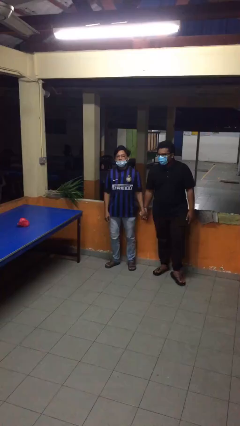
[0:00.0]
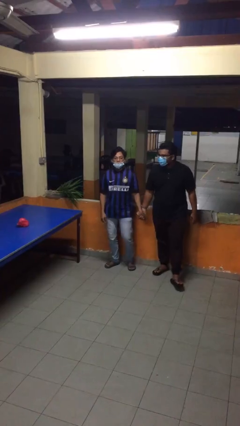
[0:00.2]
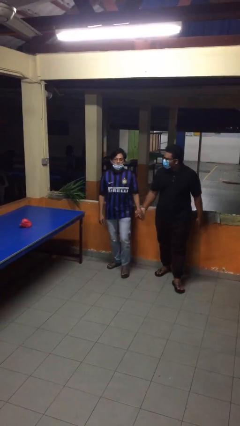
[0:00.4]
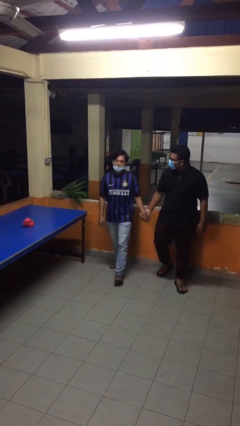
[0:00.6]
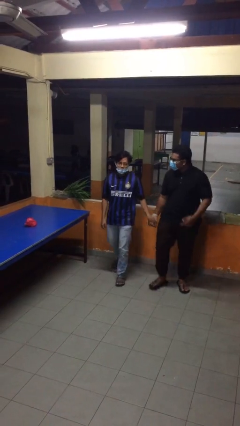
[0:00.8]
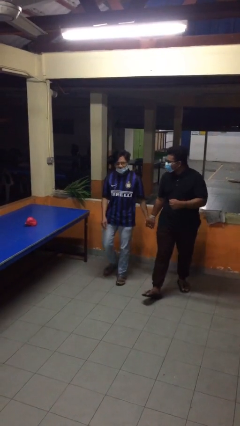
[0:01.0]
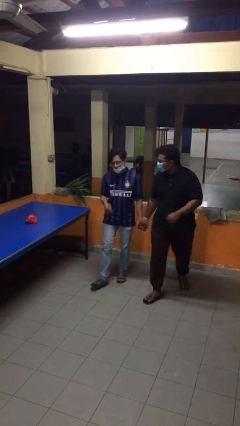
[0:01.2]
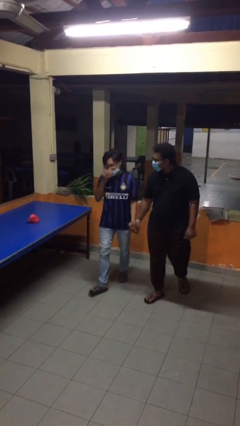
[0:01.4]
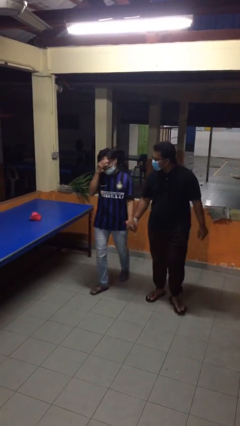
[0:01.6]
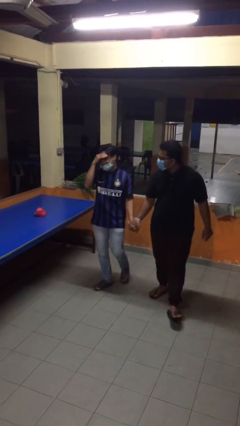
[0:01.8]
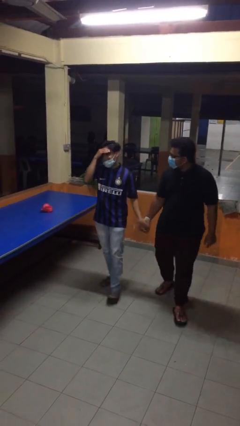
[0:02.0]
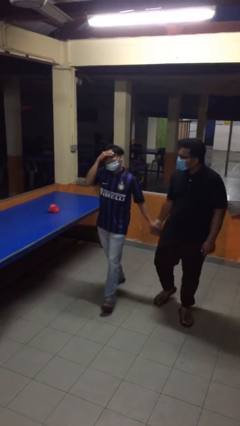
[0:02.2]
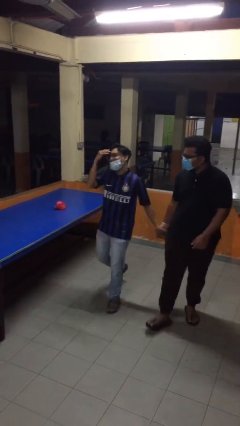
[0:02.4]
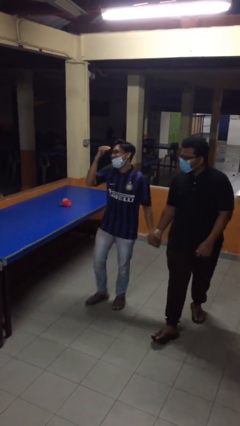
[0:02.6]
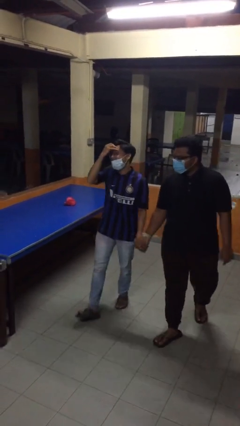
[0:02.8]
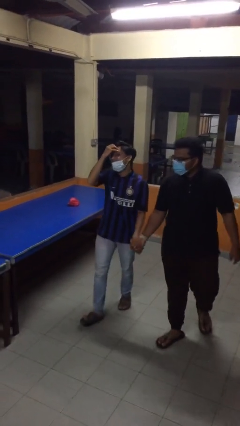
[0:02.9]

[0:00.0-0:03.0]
person holds hand

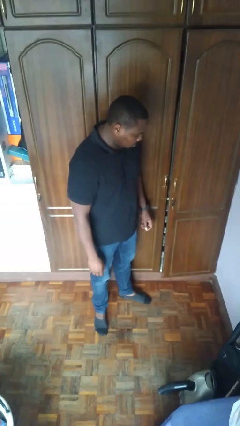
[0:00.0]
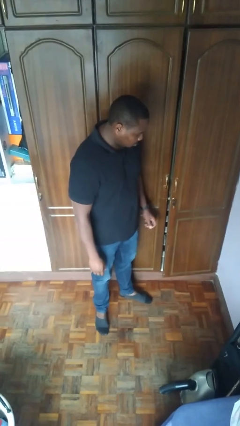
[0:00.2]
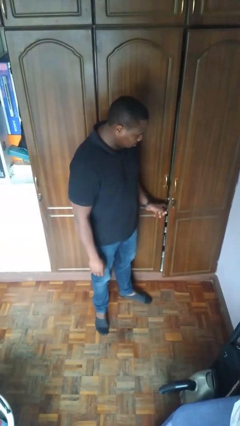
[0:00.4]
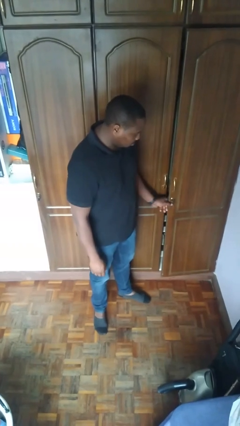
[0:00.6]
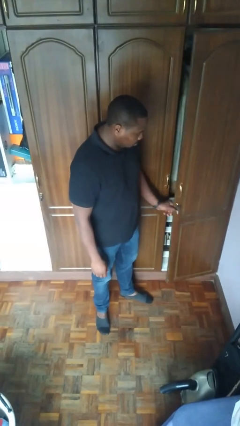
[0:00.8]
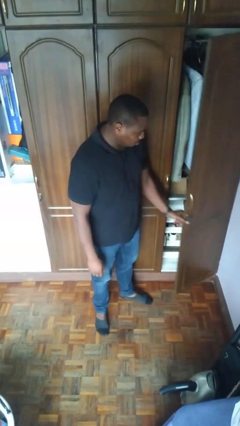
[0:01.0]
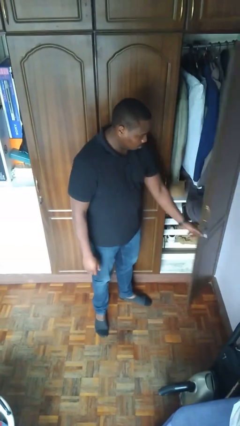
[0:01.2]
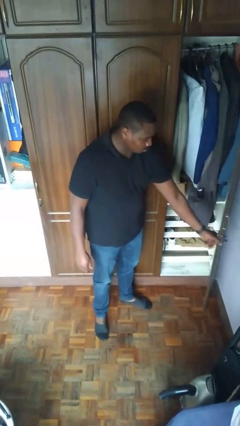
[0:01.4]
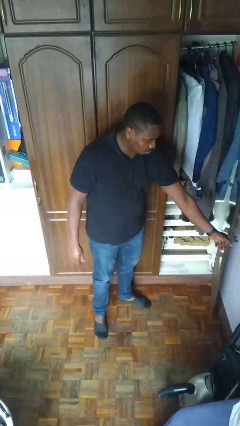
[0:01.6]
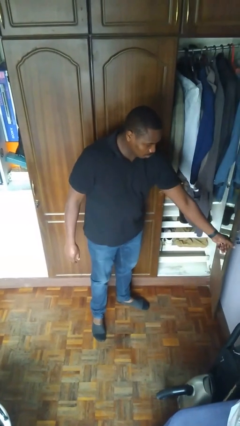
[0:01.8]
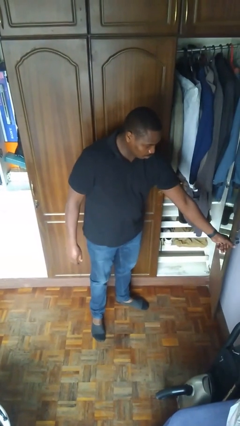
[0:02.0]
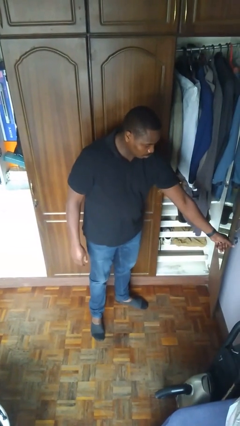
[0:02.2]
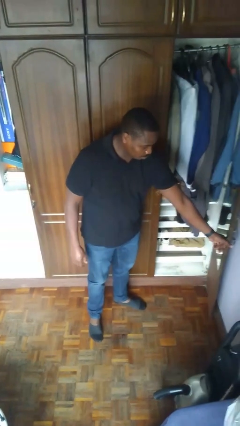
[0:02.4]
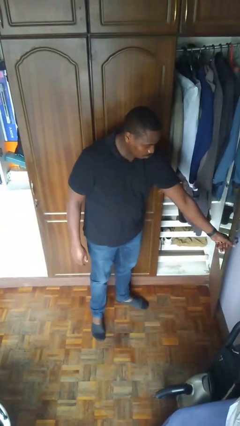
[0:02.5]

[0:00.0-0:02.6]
person opens closet door

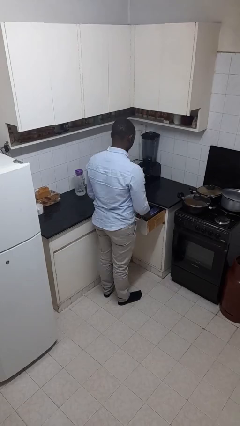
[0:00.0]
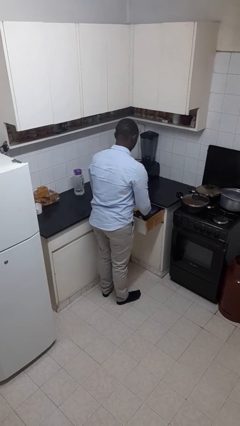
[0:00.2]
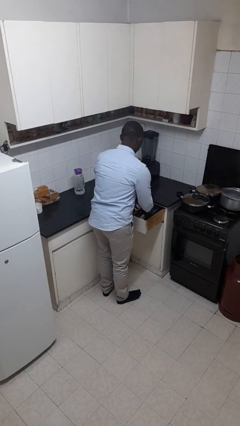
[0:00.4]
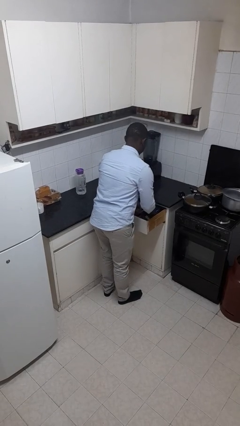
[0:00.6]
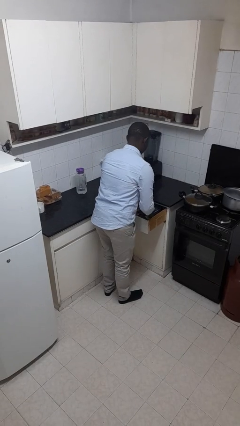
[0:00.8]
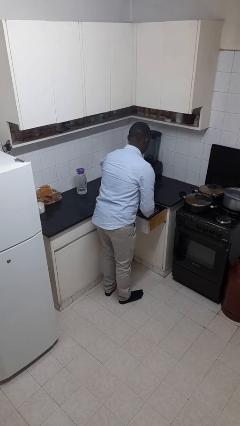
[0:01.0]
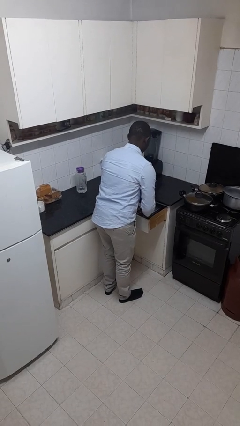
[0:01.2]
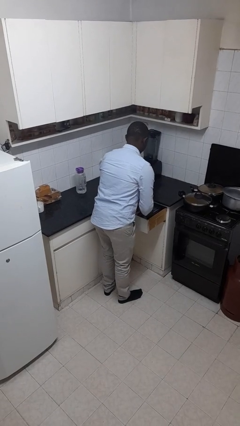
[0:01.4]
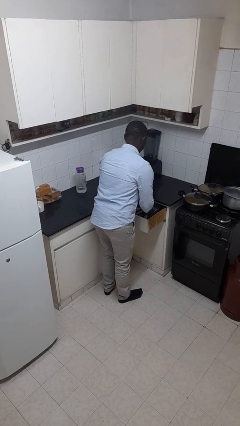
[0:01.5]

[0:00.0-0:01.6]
person searches in kitchen drawer

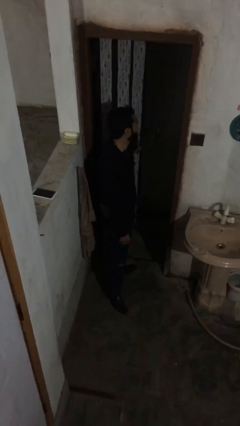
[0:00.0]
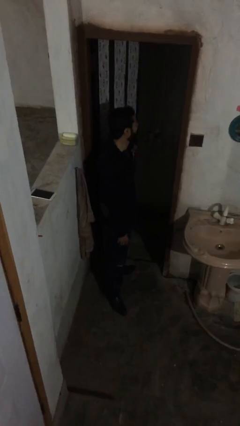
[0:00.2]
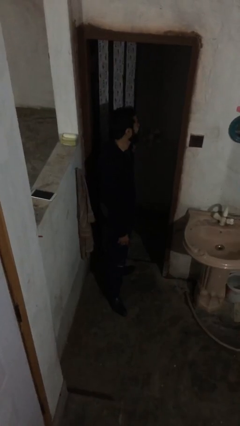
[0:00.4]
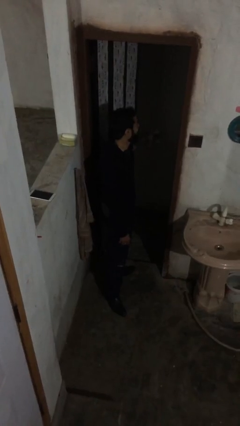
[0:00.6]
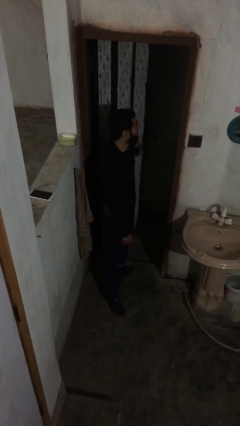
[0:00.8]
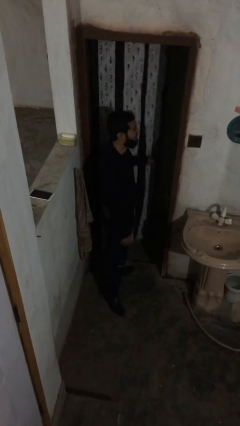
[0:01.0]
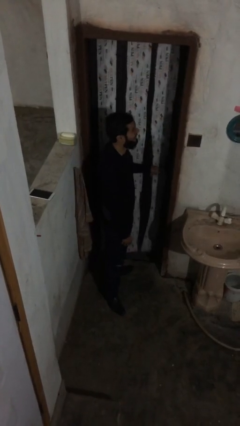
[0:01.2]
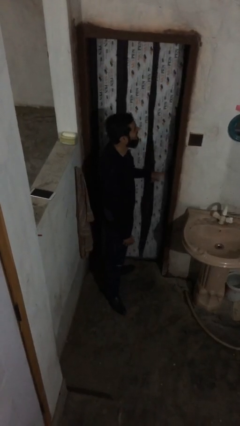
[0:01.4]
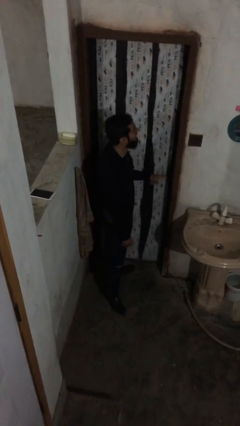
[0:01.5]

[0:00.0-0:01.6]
person closes facility door

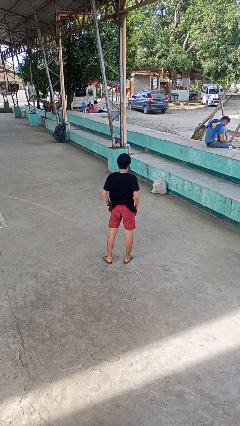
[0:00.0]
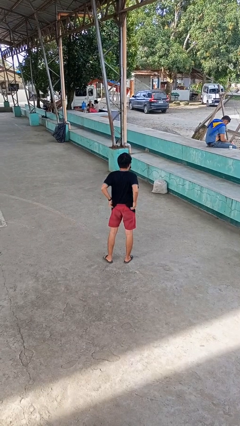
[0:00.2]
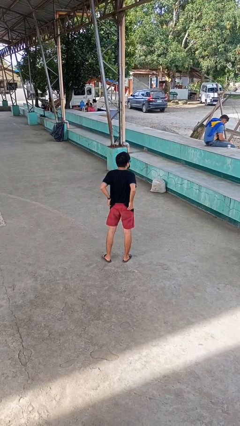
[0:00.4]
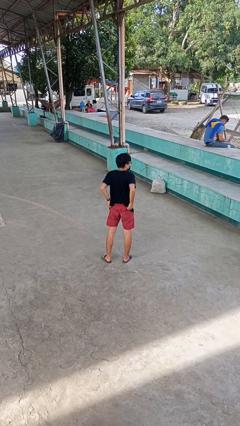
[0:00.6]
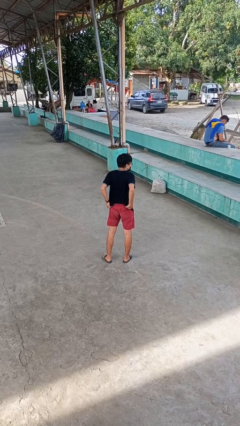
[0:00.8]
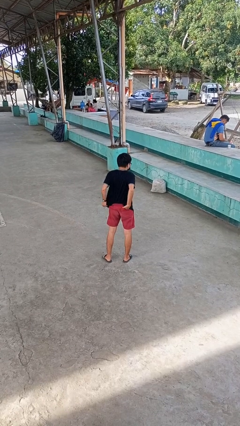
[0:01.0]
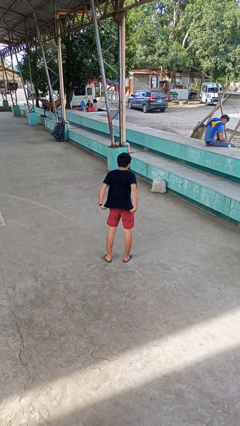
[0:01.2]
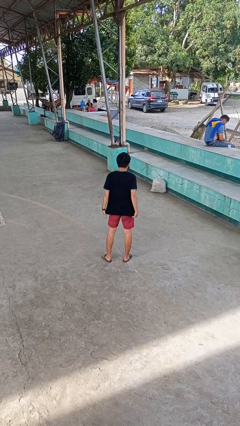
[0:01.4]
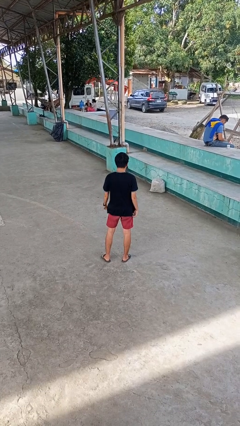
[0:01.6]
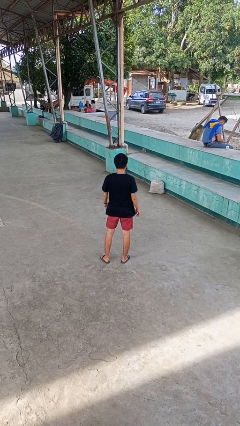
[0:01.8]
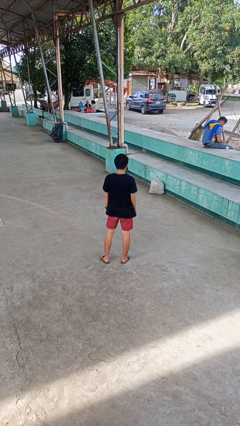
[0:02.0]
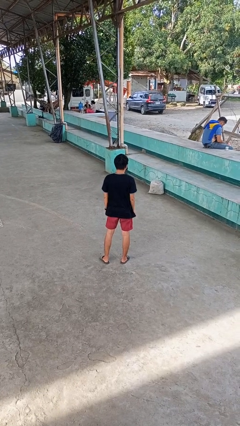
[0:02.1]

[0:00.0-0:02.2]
person untucks shirt

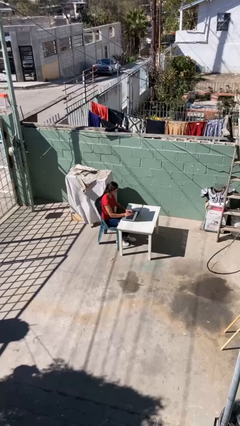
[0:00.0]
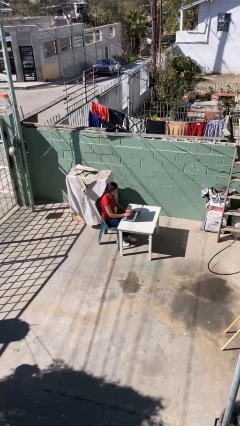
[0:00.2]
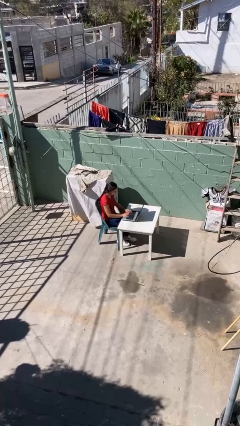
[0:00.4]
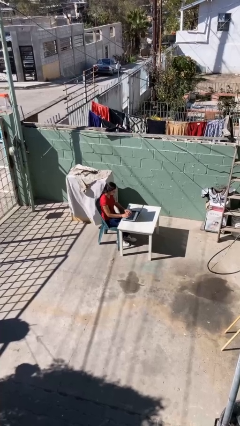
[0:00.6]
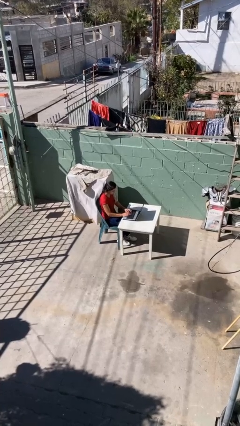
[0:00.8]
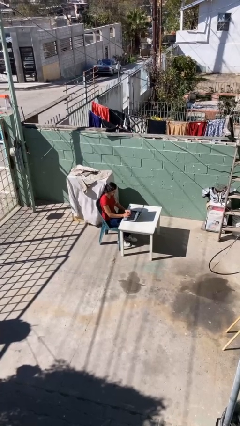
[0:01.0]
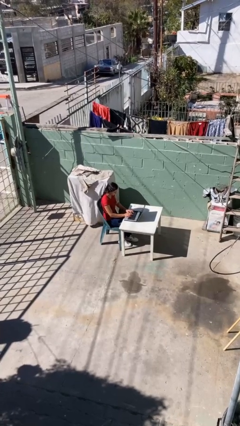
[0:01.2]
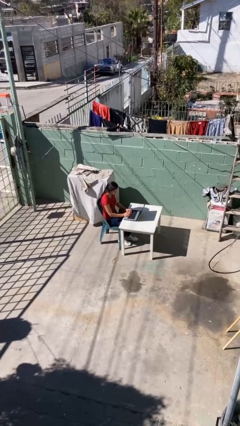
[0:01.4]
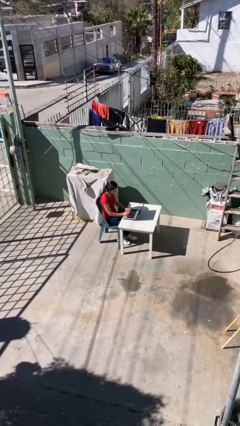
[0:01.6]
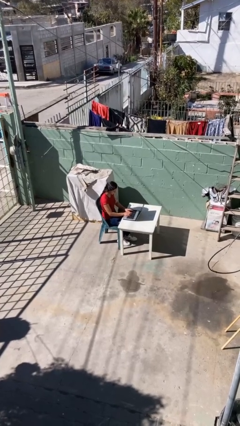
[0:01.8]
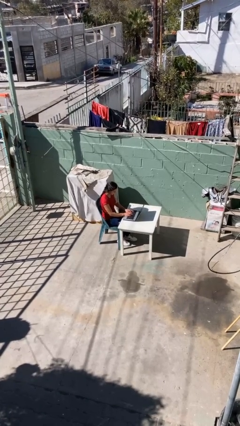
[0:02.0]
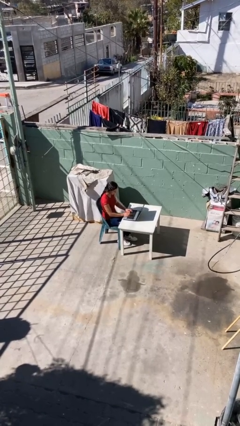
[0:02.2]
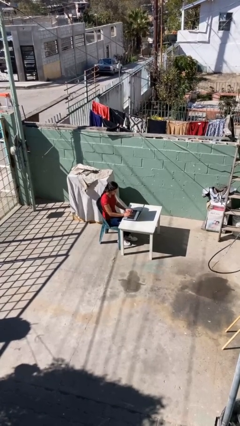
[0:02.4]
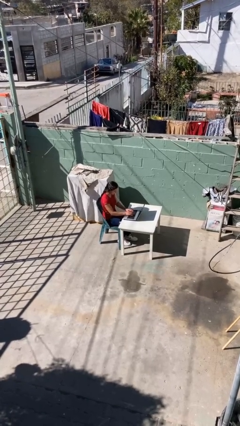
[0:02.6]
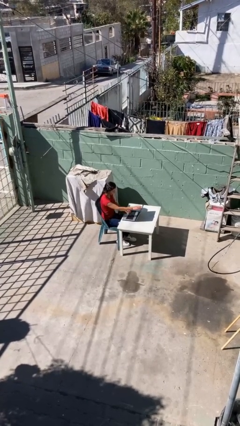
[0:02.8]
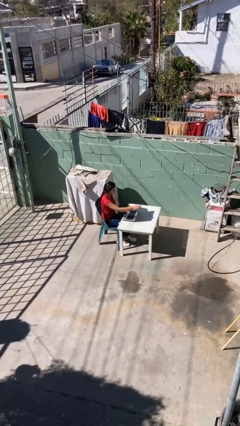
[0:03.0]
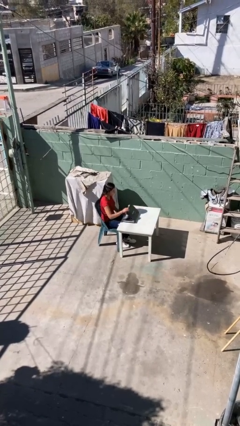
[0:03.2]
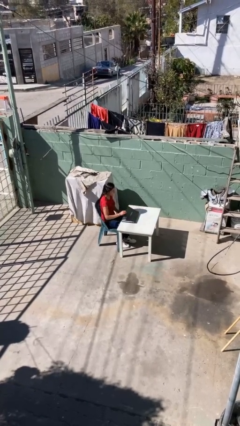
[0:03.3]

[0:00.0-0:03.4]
person interacts with laptop

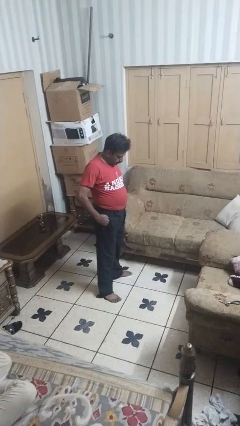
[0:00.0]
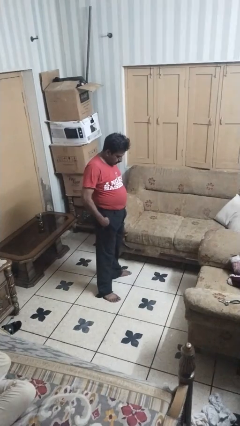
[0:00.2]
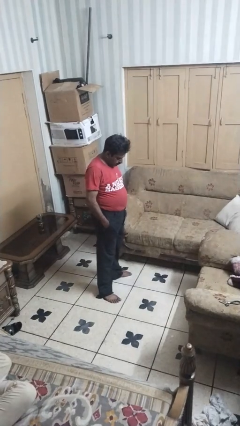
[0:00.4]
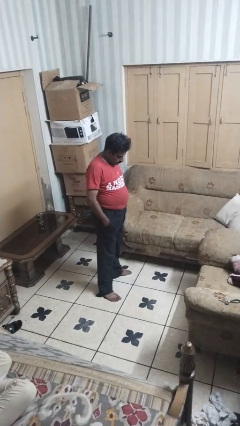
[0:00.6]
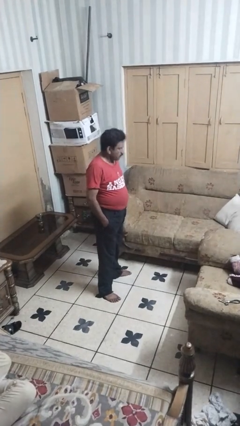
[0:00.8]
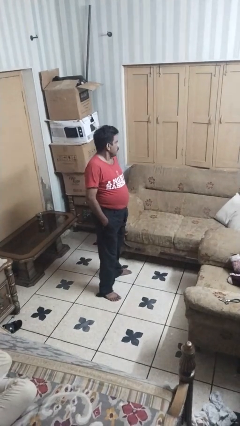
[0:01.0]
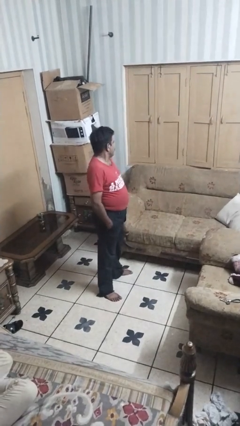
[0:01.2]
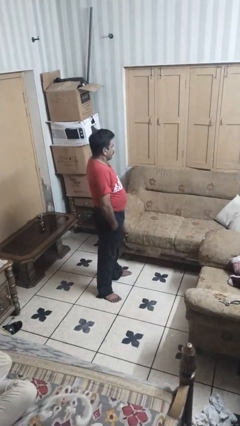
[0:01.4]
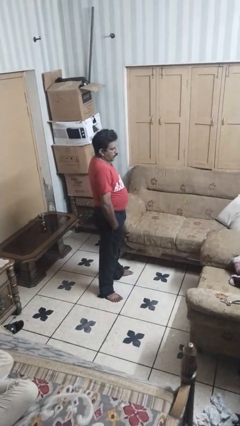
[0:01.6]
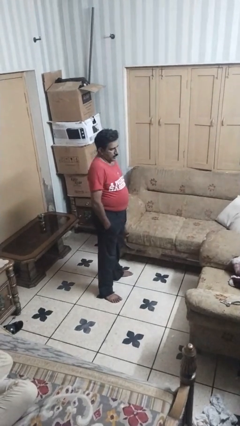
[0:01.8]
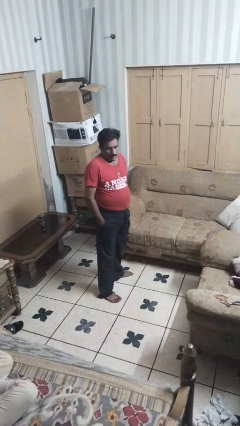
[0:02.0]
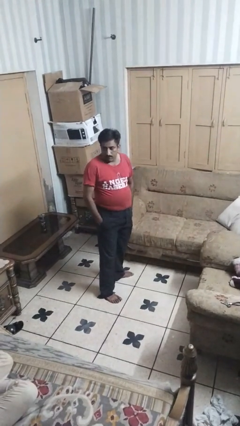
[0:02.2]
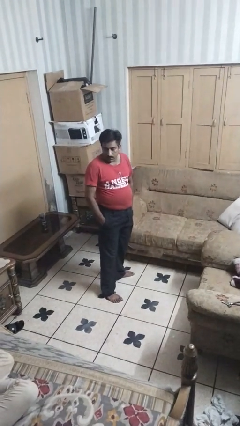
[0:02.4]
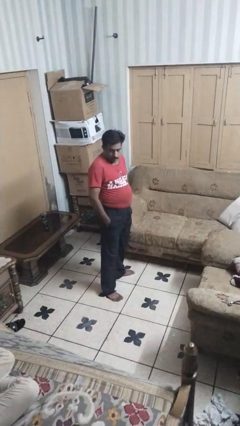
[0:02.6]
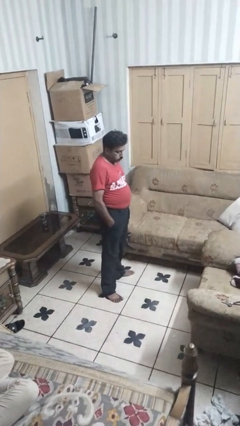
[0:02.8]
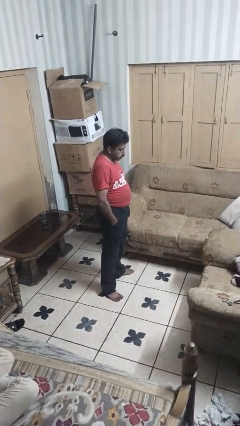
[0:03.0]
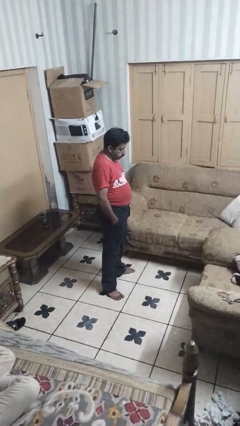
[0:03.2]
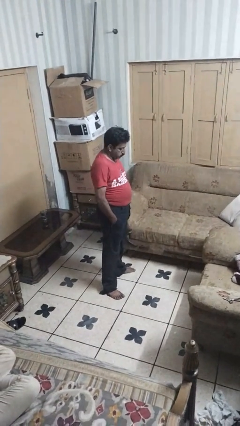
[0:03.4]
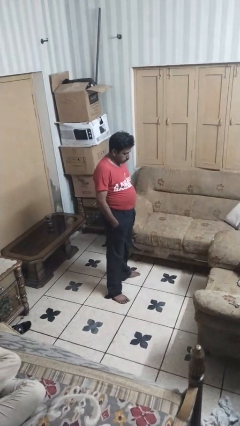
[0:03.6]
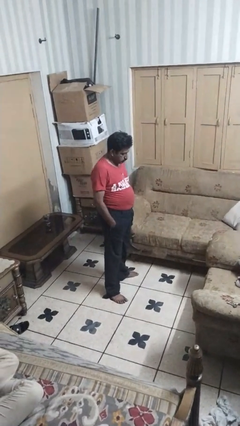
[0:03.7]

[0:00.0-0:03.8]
person puts hands in back pockets
